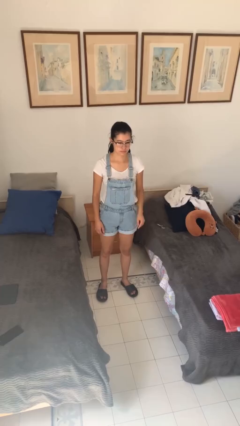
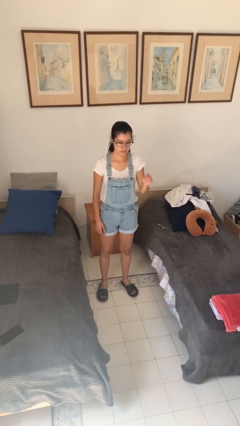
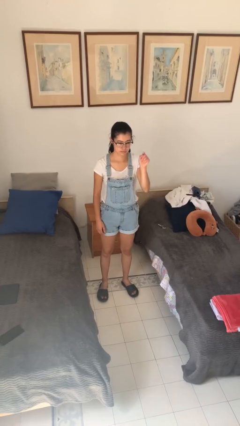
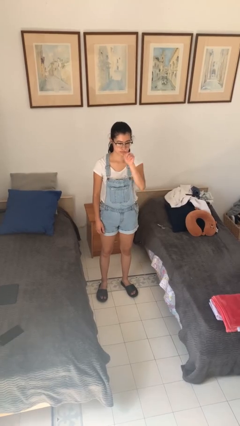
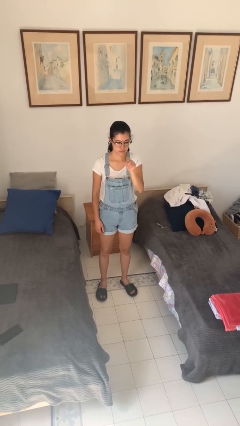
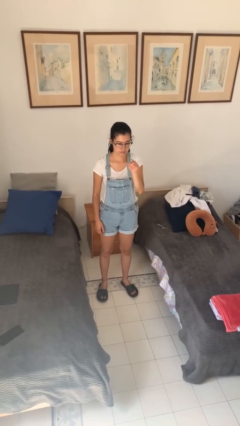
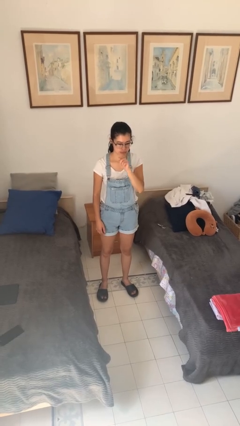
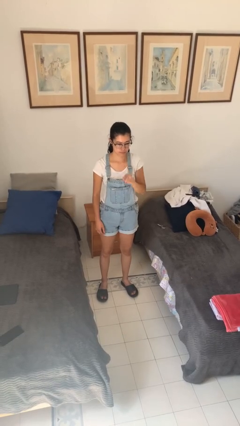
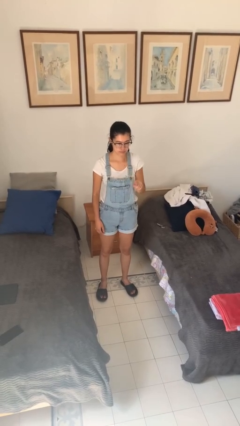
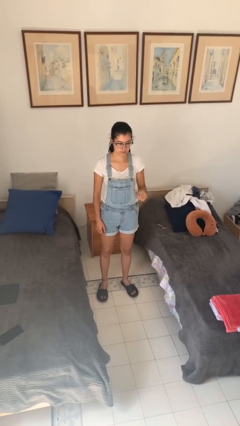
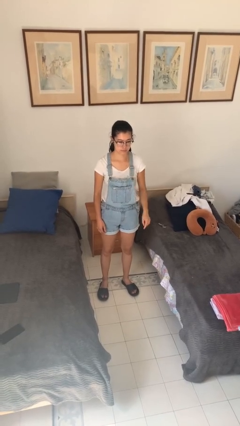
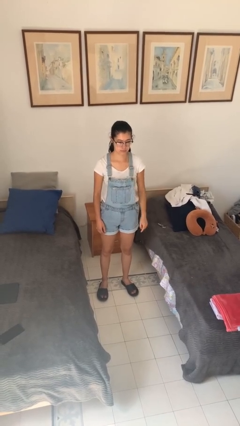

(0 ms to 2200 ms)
person gestures number three

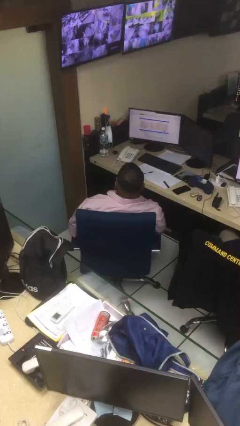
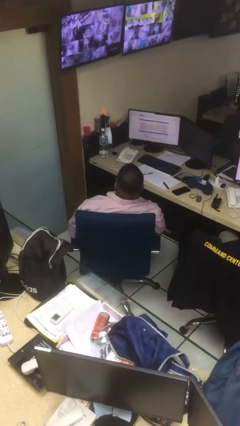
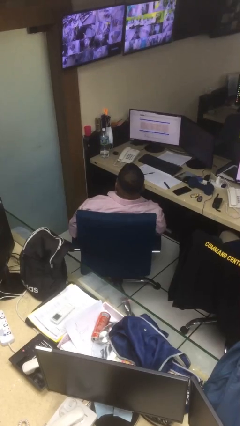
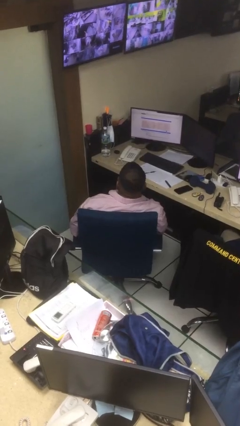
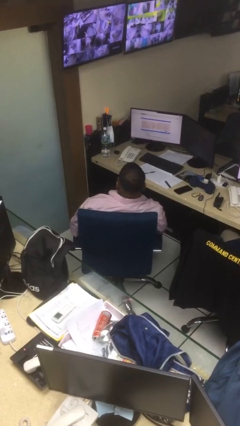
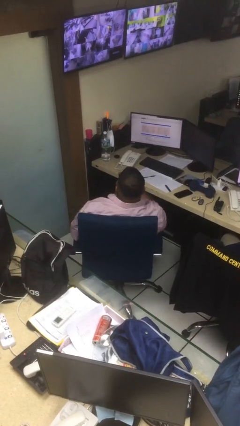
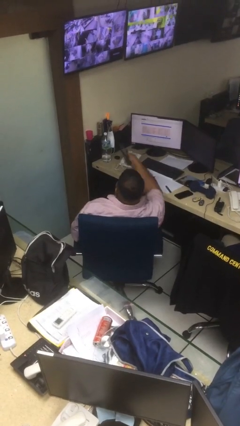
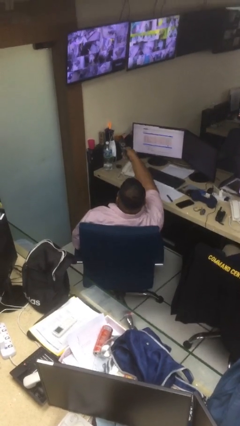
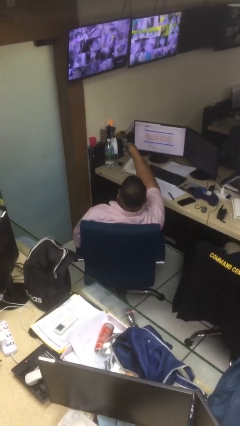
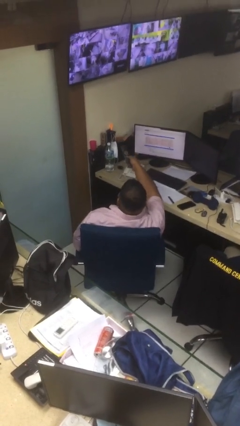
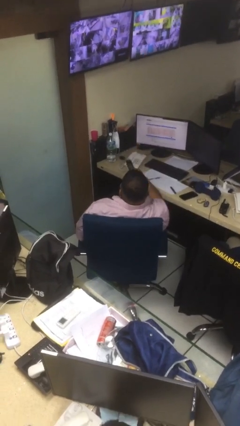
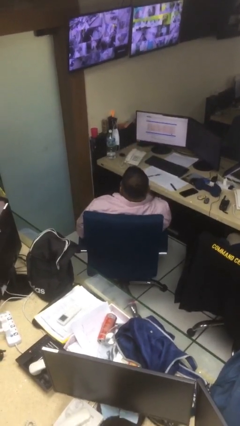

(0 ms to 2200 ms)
person uses television remote

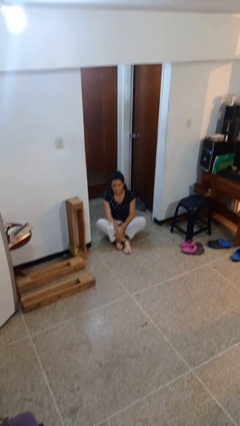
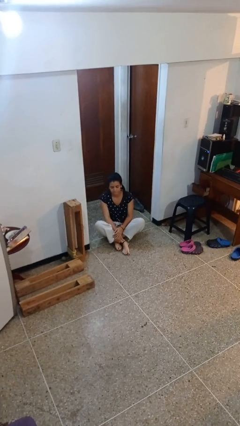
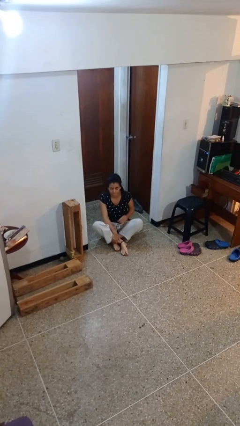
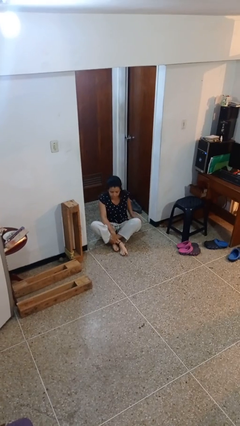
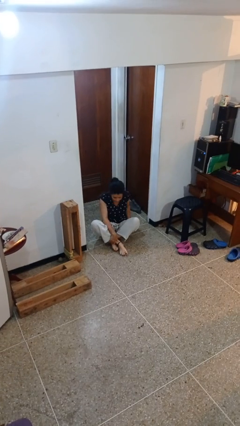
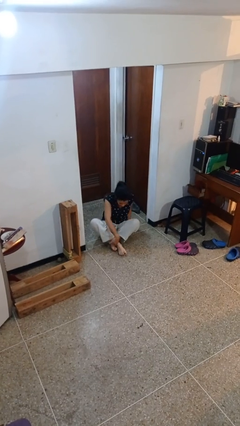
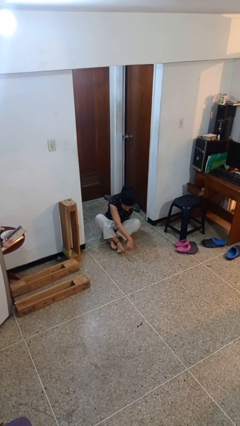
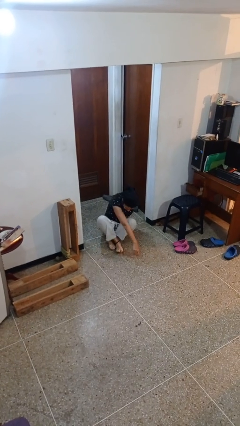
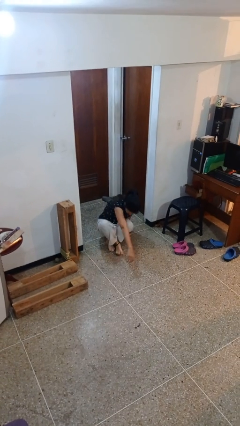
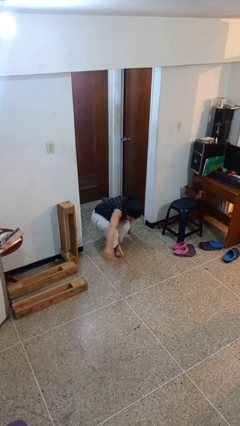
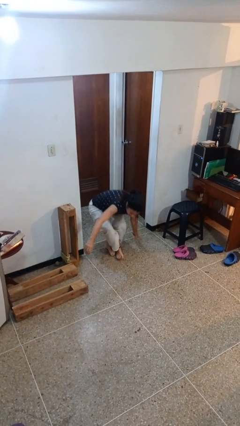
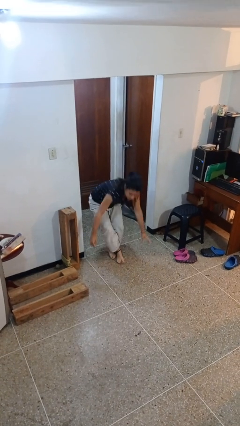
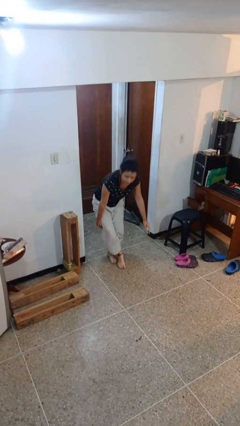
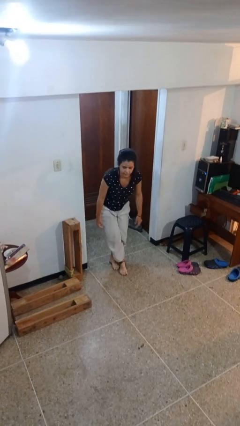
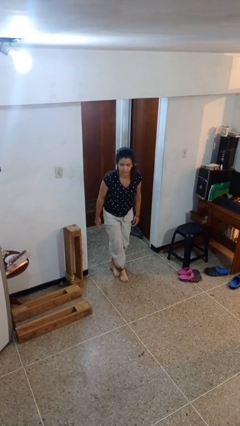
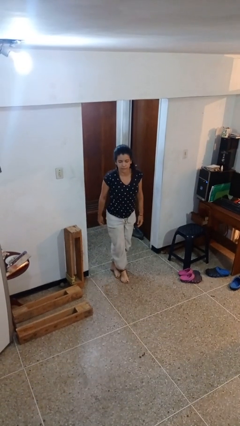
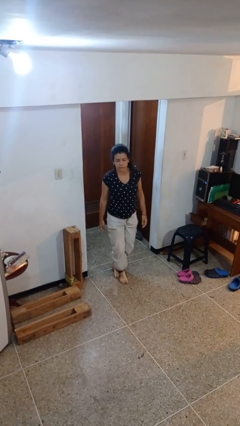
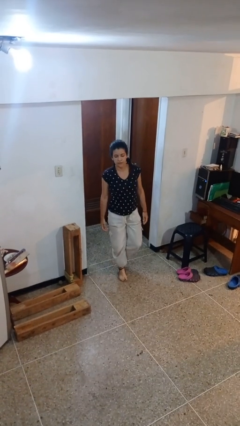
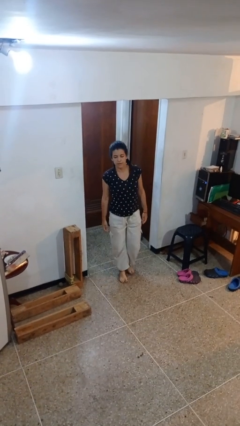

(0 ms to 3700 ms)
person stands up from floor

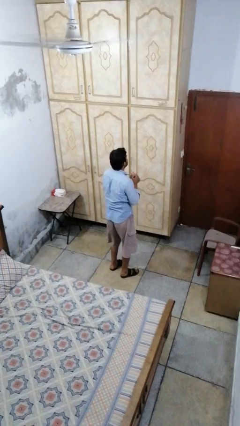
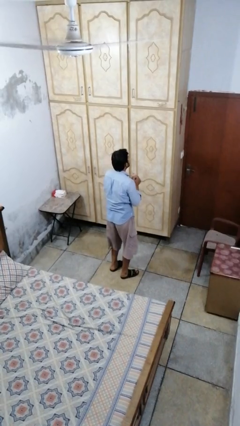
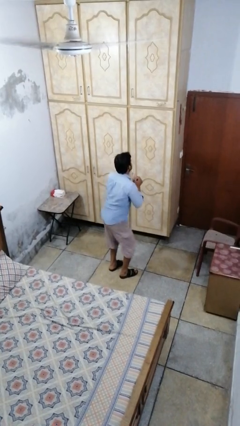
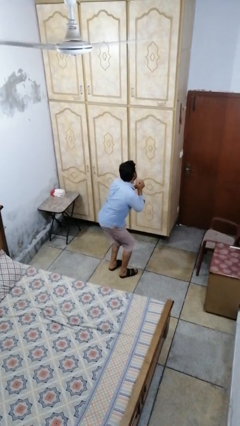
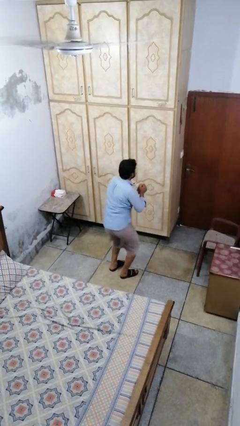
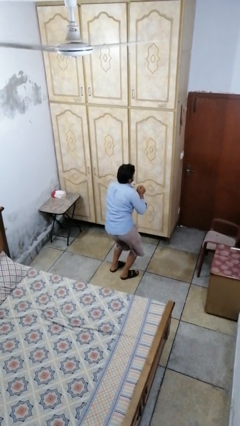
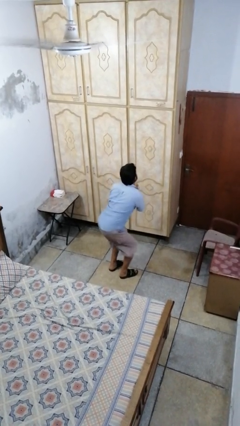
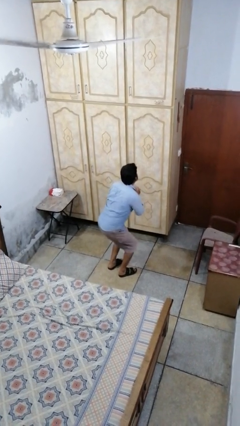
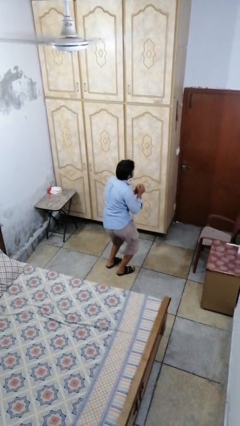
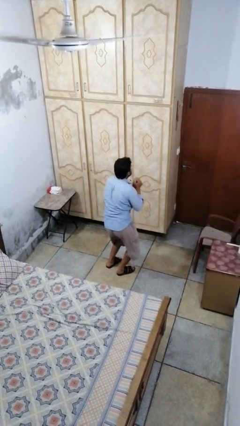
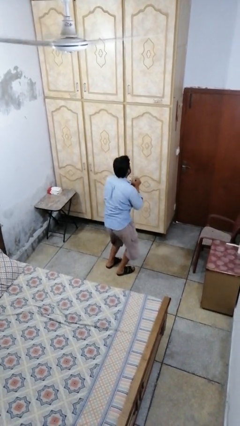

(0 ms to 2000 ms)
person wiggles hips

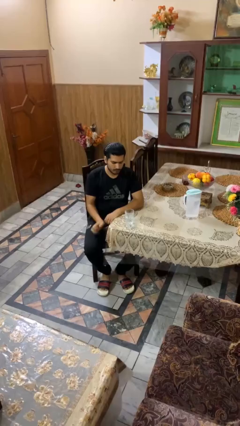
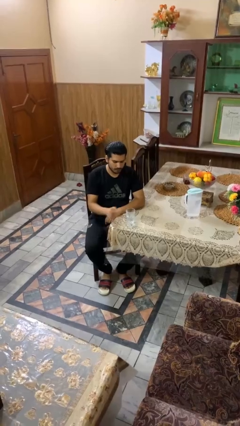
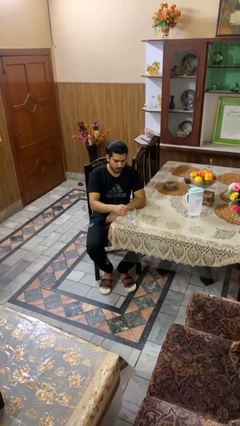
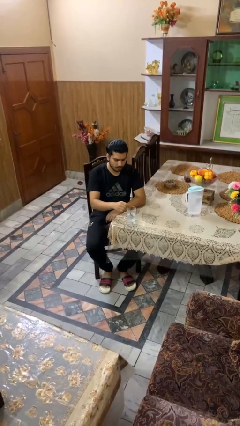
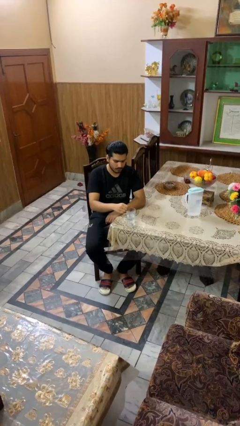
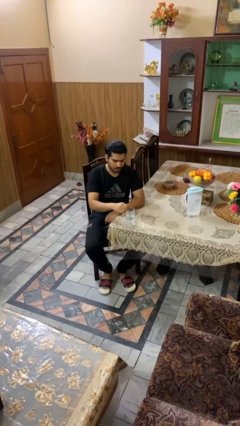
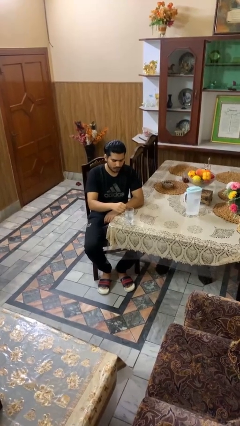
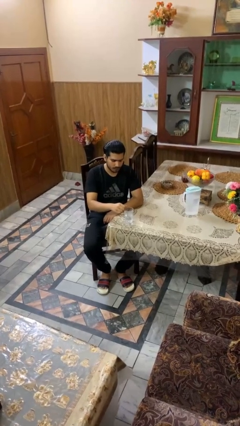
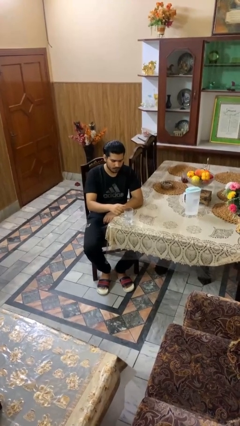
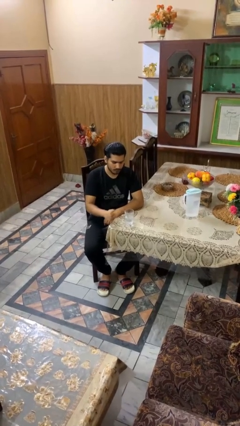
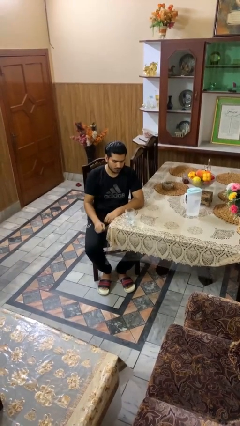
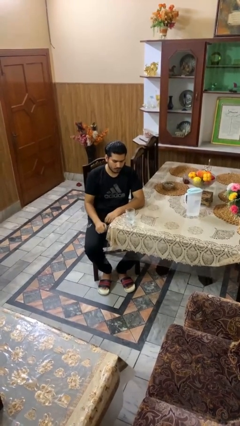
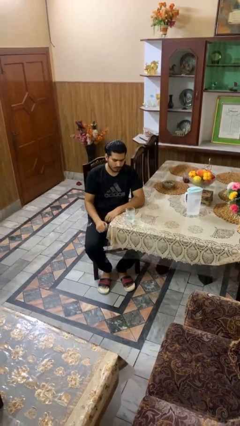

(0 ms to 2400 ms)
person stirs mug

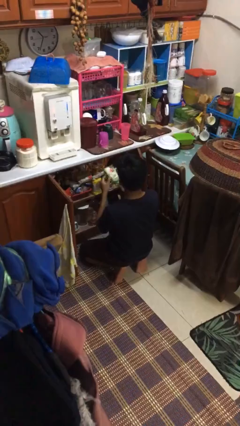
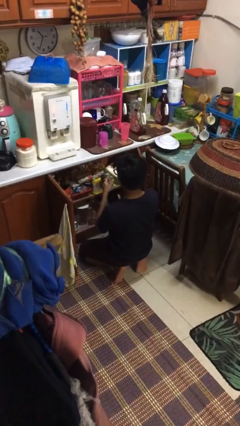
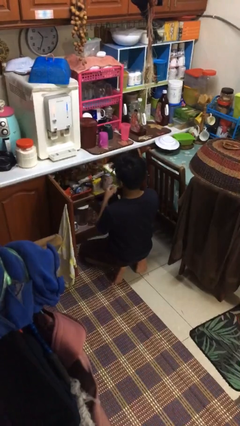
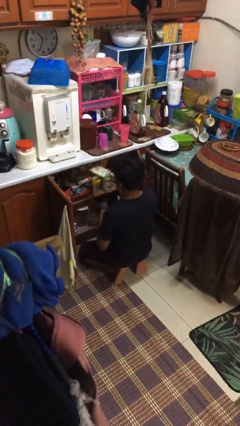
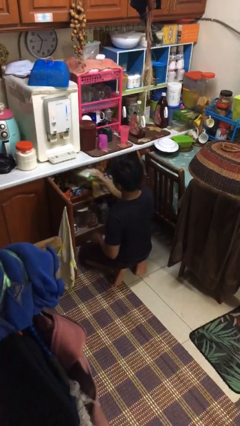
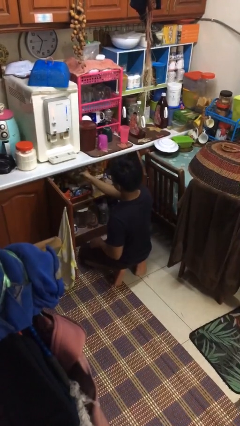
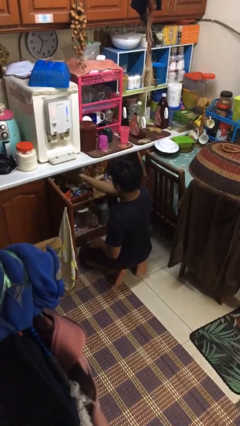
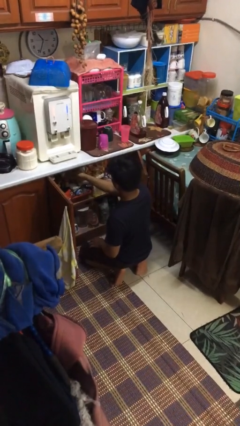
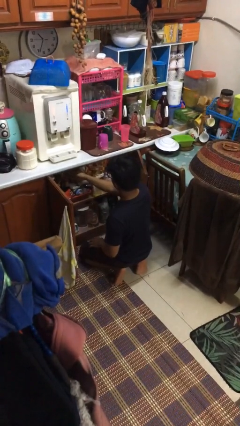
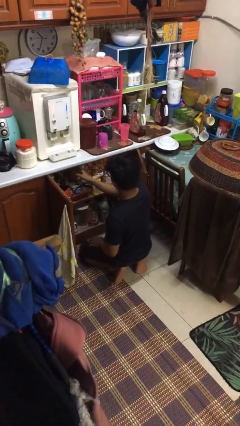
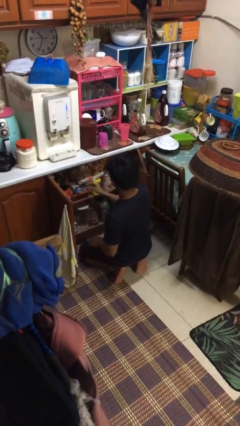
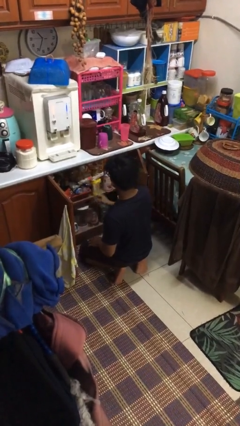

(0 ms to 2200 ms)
person puts object in cabinet

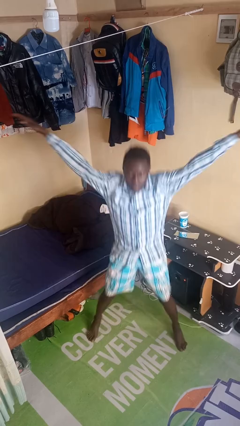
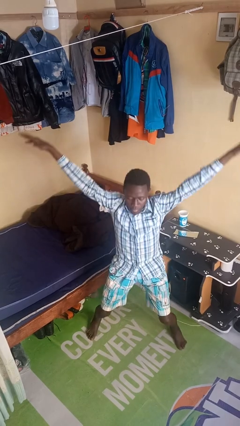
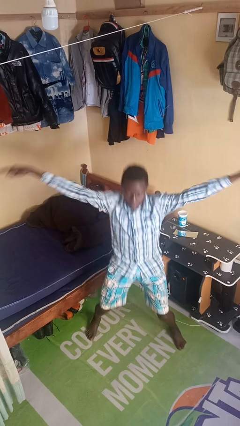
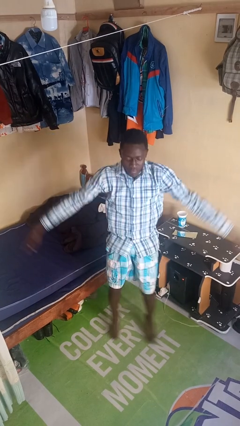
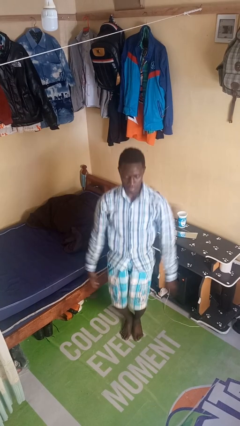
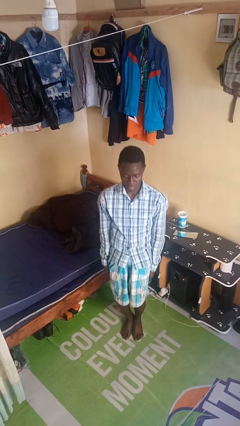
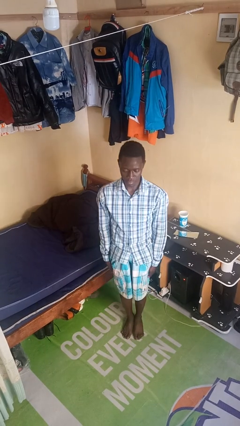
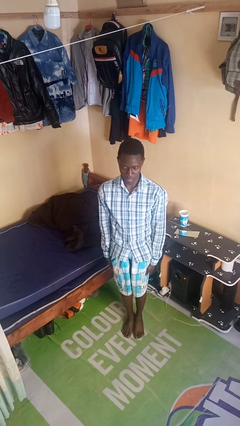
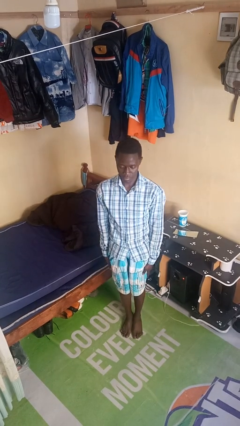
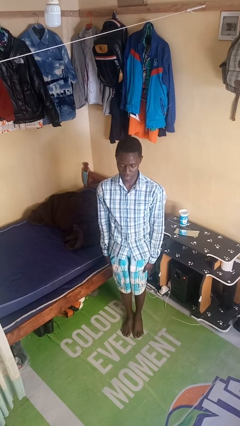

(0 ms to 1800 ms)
person exercises with jumping jacks

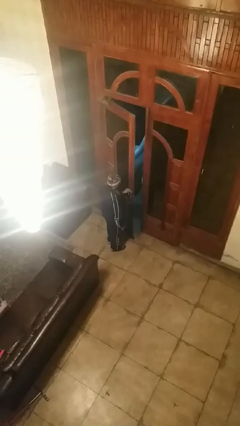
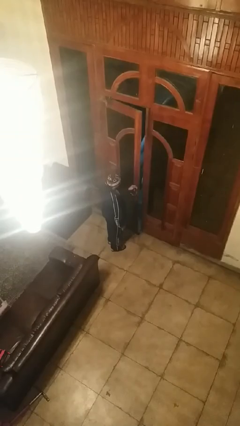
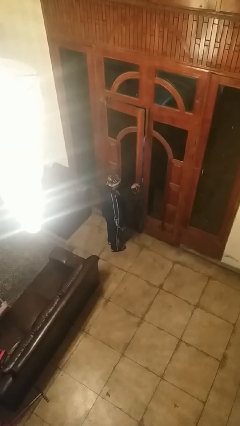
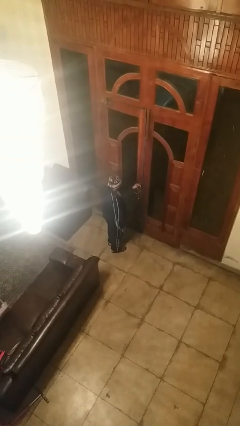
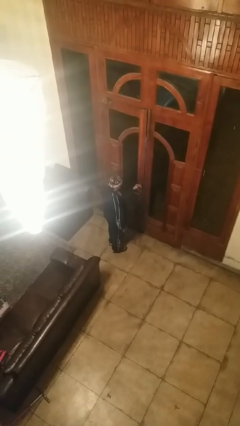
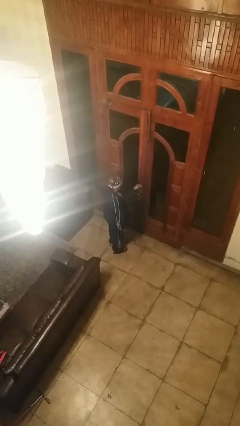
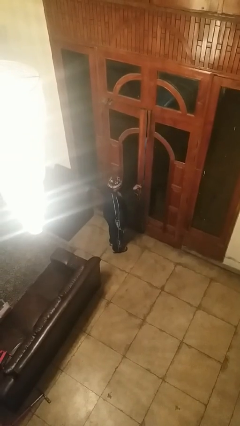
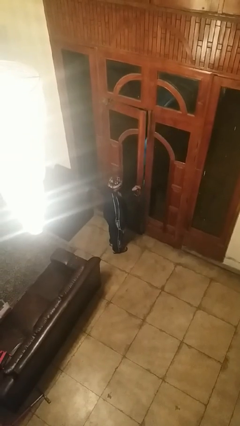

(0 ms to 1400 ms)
person closes facility door
